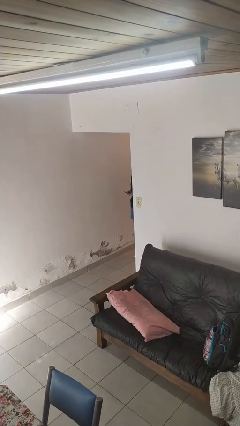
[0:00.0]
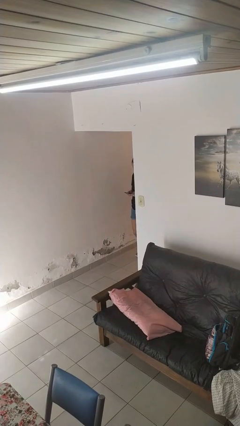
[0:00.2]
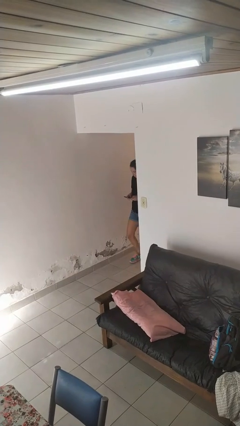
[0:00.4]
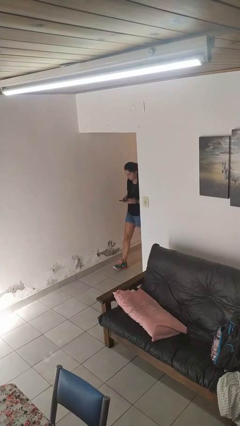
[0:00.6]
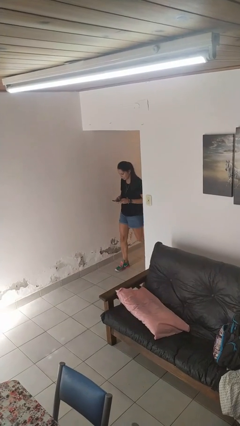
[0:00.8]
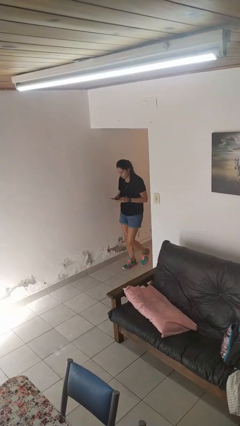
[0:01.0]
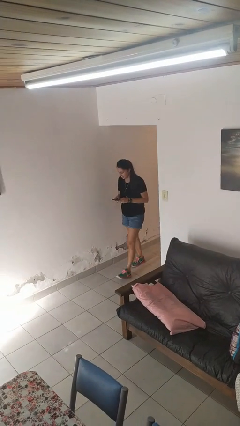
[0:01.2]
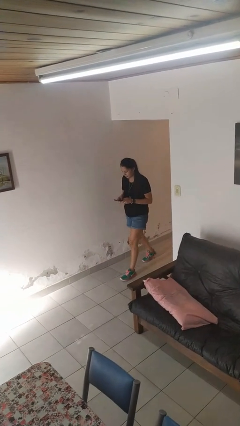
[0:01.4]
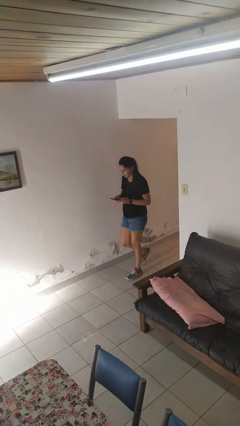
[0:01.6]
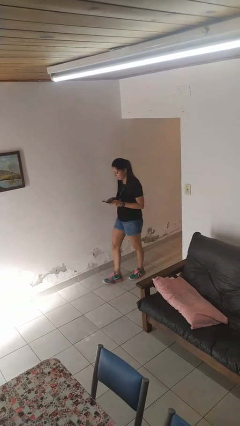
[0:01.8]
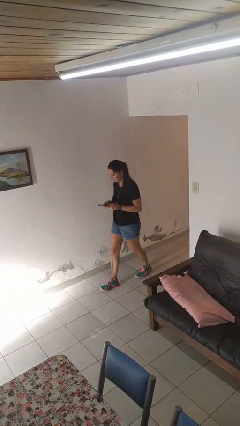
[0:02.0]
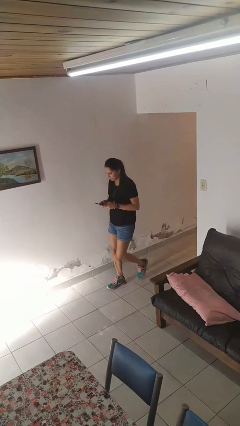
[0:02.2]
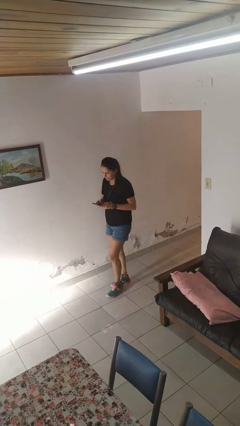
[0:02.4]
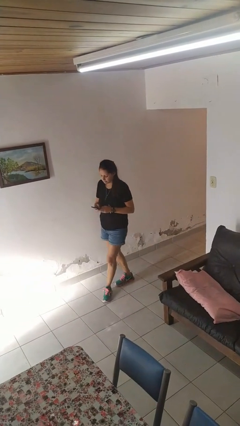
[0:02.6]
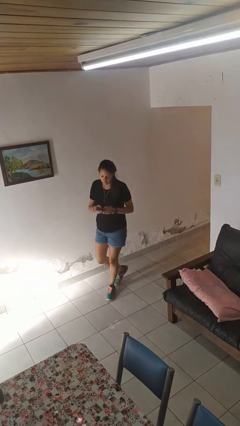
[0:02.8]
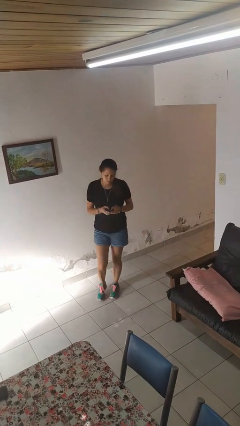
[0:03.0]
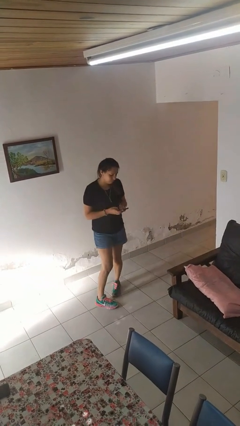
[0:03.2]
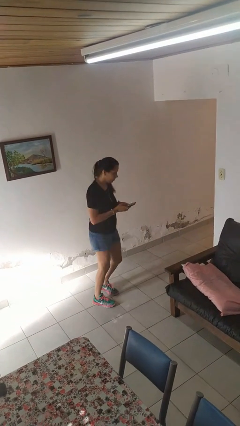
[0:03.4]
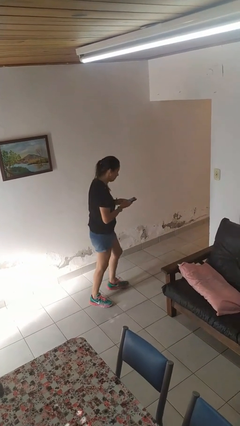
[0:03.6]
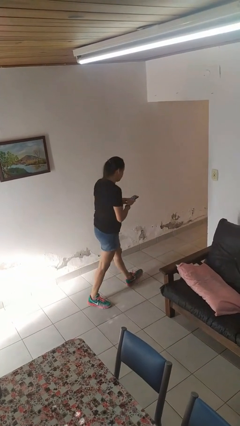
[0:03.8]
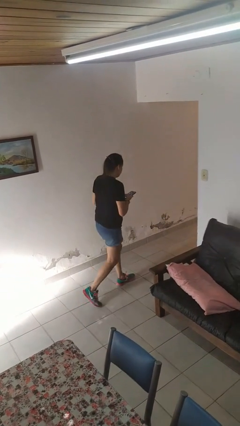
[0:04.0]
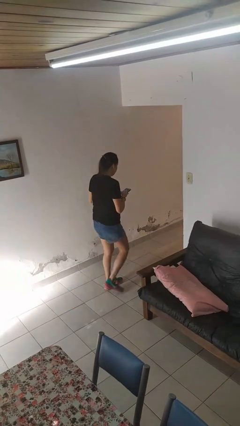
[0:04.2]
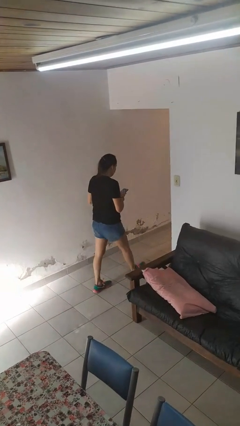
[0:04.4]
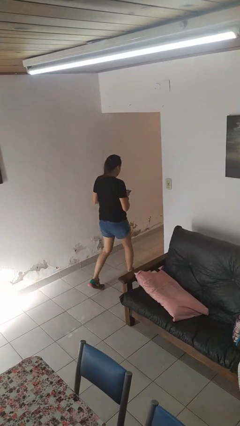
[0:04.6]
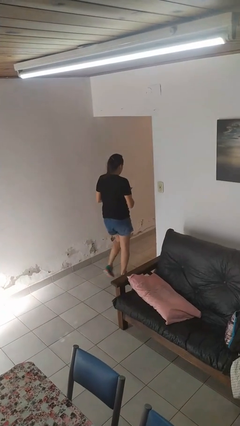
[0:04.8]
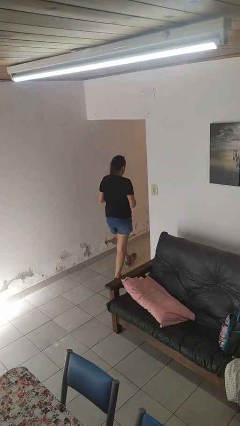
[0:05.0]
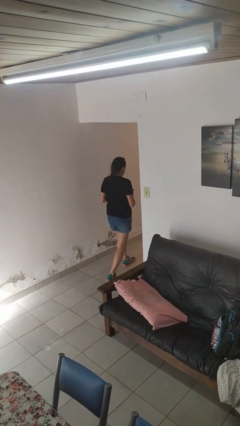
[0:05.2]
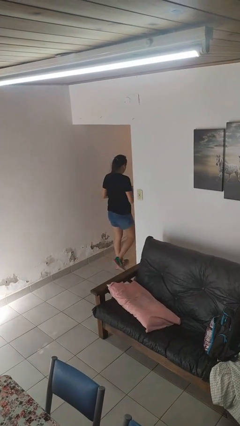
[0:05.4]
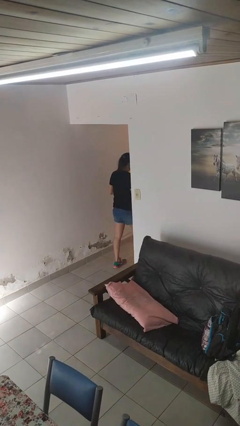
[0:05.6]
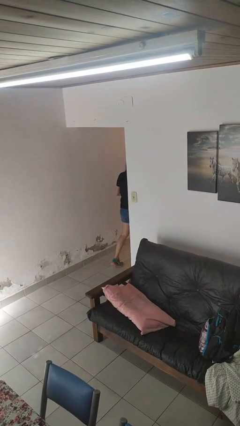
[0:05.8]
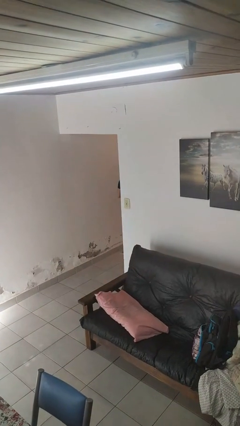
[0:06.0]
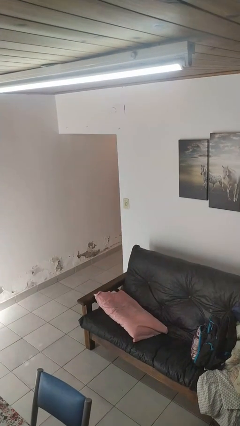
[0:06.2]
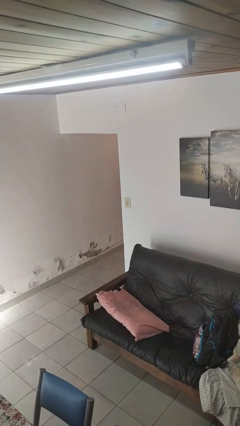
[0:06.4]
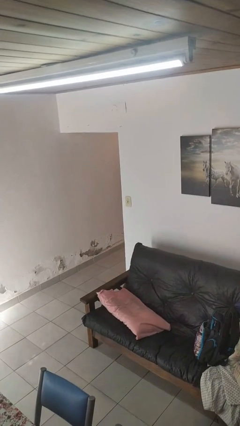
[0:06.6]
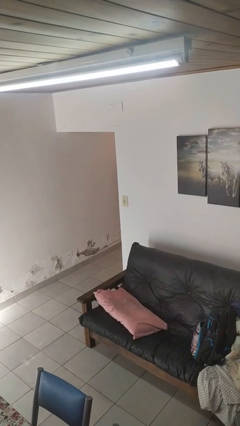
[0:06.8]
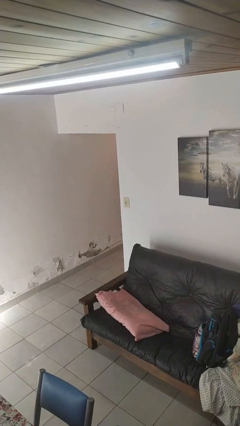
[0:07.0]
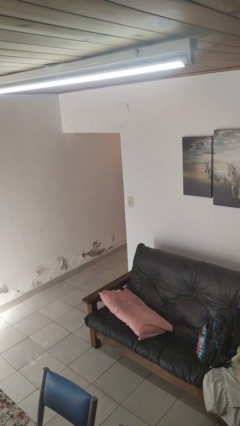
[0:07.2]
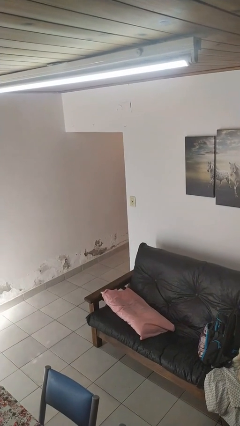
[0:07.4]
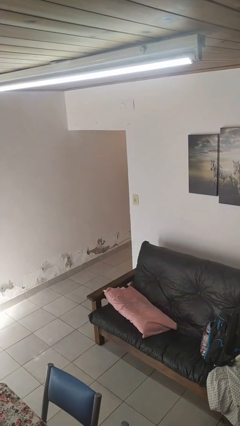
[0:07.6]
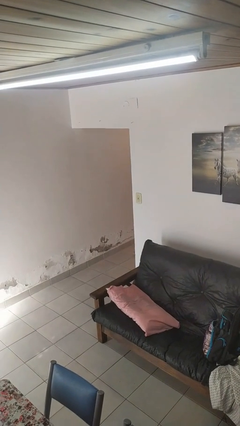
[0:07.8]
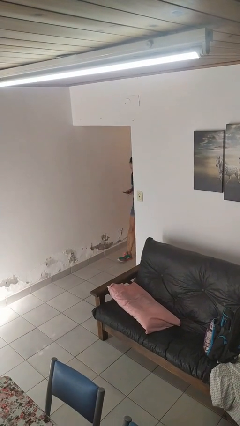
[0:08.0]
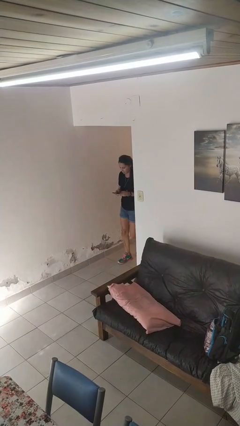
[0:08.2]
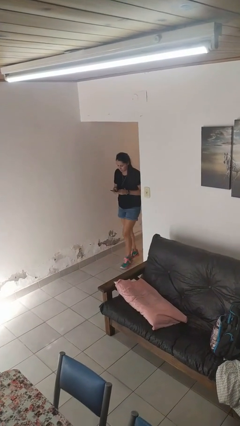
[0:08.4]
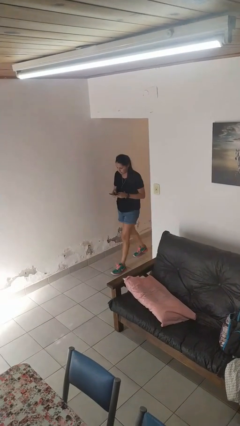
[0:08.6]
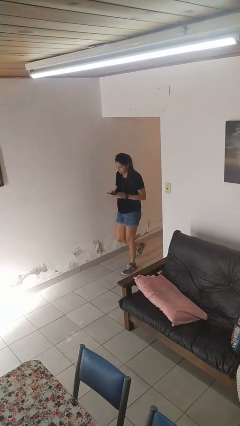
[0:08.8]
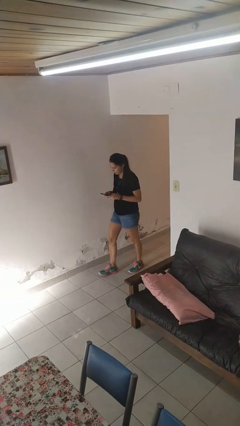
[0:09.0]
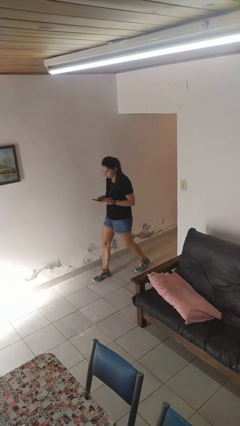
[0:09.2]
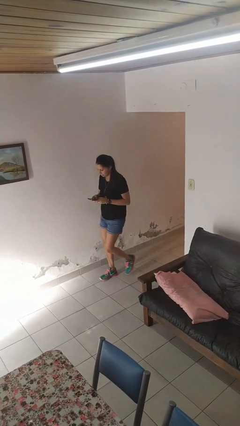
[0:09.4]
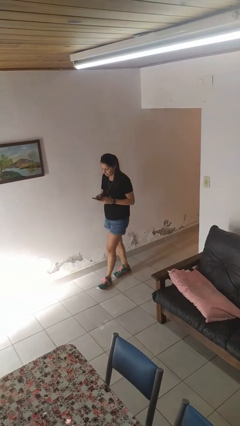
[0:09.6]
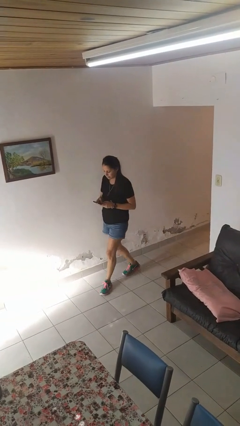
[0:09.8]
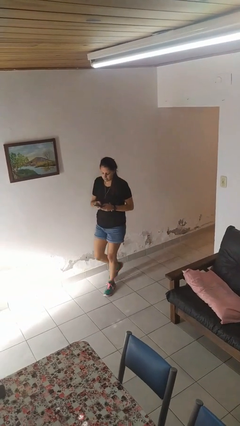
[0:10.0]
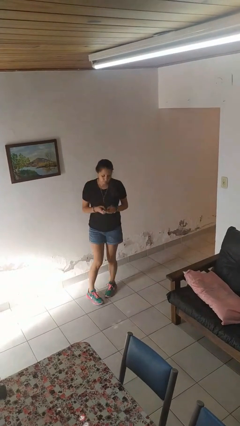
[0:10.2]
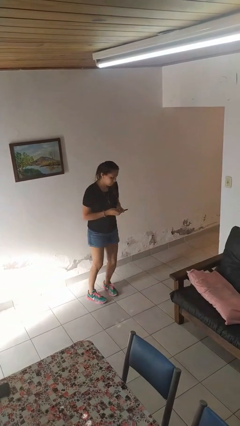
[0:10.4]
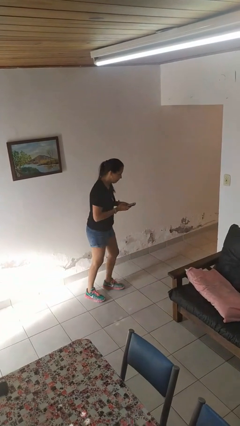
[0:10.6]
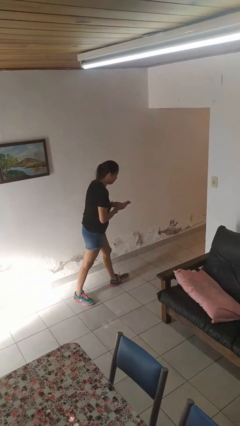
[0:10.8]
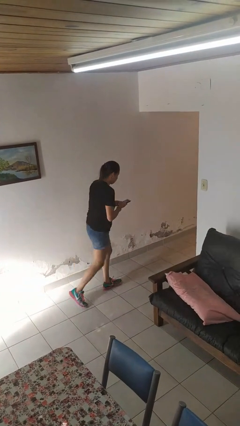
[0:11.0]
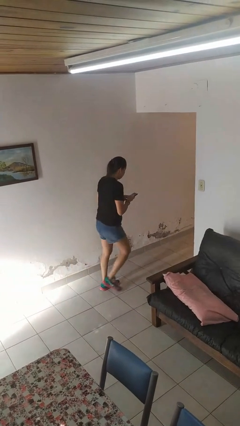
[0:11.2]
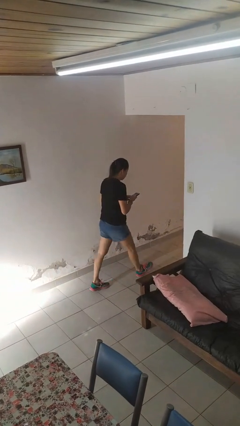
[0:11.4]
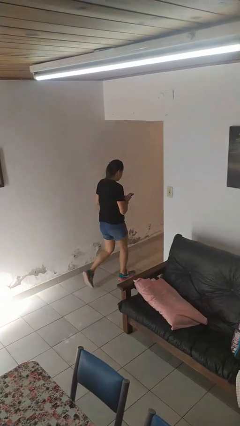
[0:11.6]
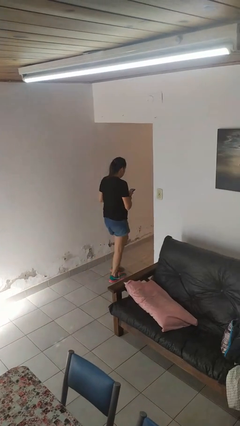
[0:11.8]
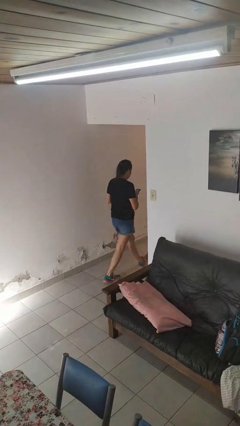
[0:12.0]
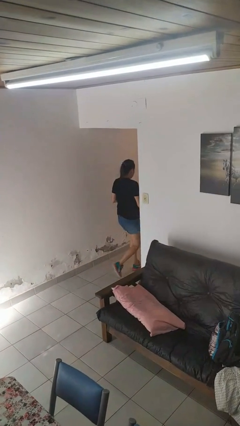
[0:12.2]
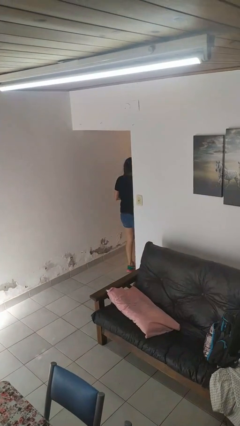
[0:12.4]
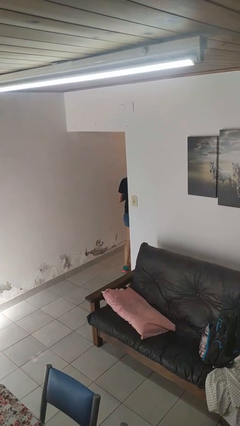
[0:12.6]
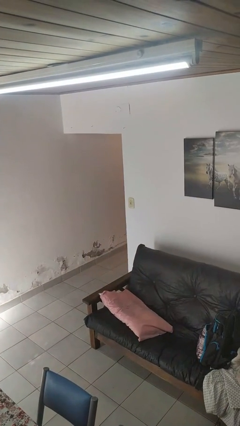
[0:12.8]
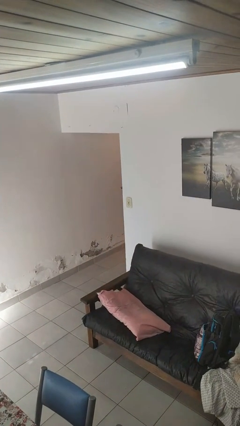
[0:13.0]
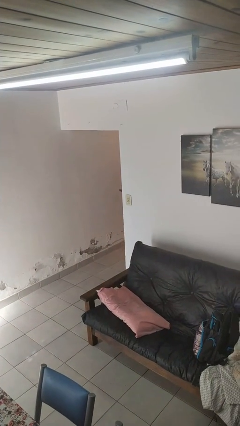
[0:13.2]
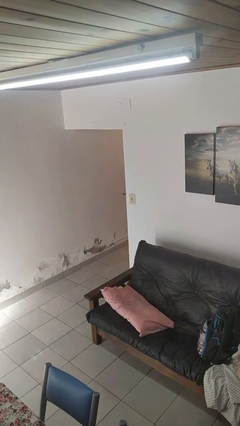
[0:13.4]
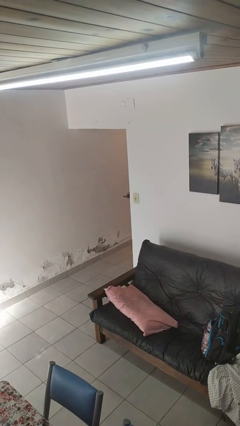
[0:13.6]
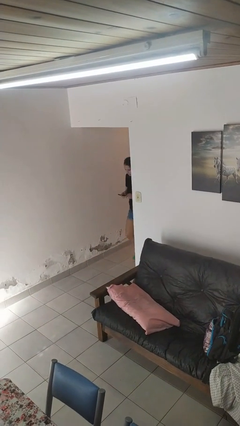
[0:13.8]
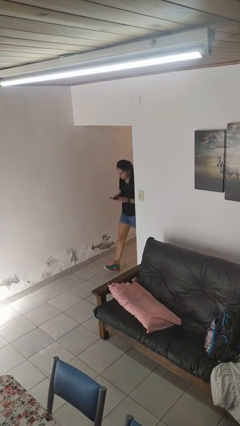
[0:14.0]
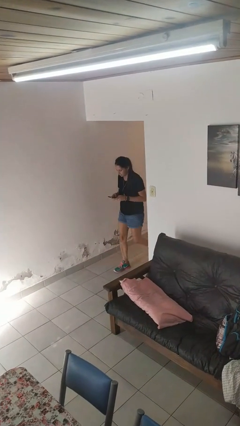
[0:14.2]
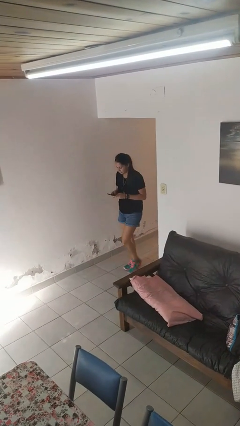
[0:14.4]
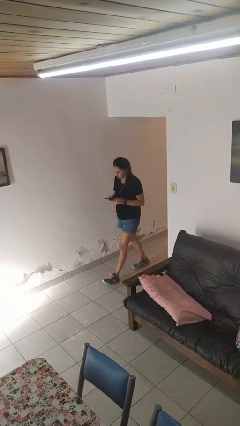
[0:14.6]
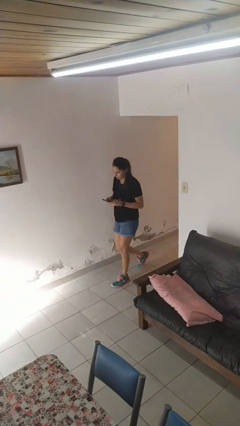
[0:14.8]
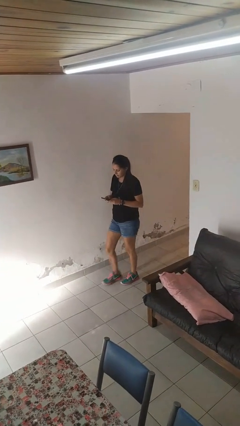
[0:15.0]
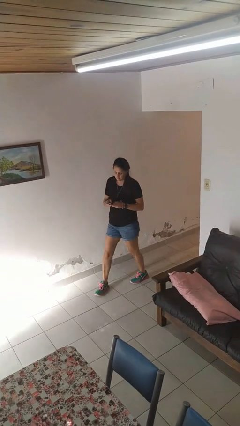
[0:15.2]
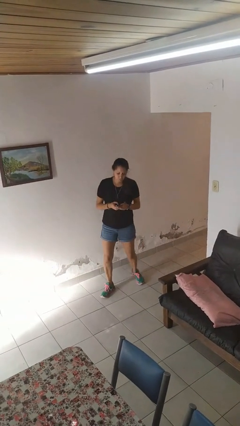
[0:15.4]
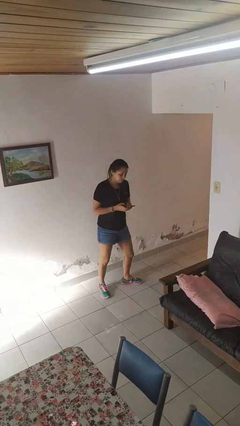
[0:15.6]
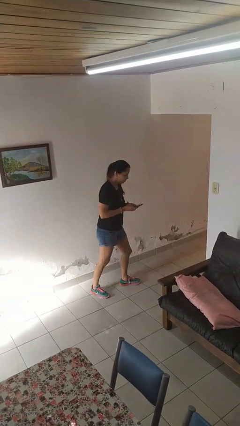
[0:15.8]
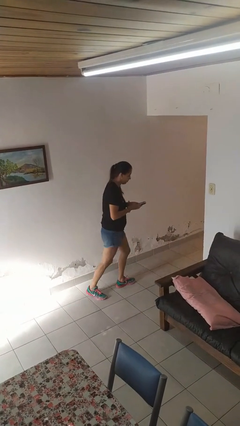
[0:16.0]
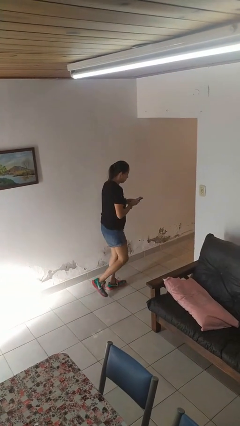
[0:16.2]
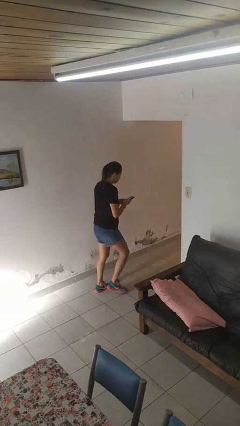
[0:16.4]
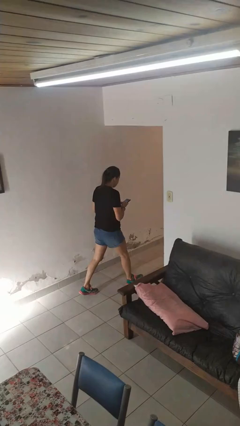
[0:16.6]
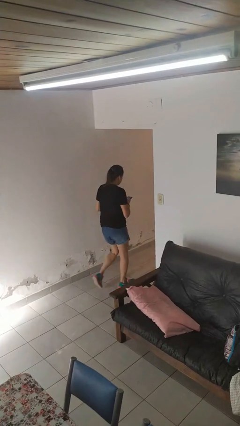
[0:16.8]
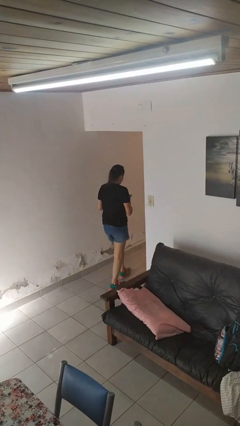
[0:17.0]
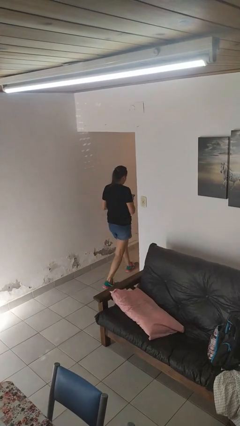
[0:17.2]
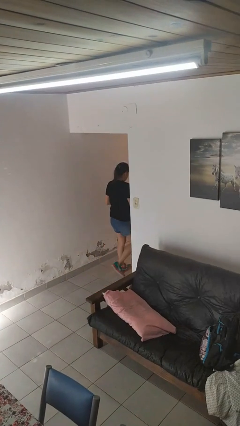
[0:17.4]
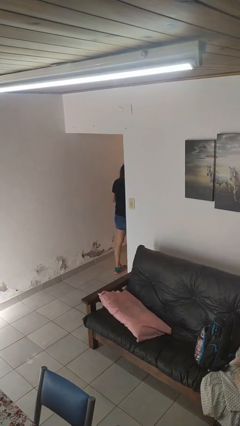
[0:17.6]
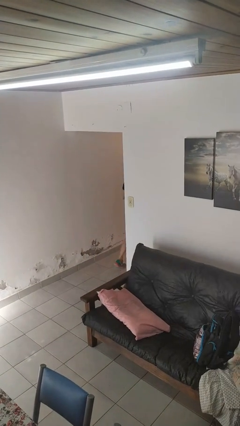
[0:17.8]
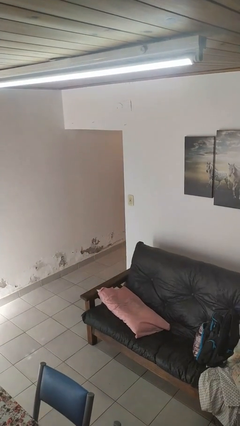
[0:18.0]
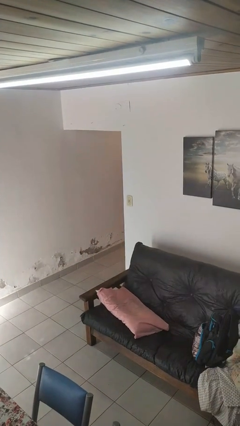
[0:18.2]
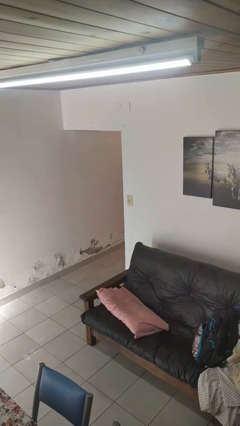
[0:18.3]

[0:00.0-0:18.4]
person texts on phone
